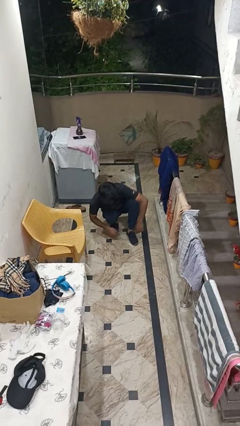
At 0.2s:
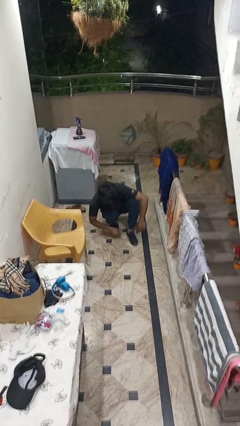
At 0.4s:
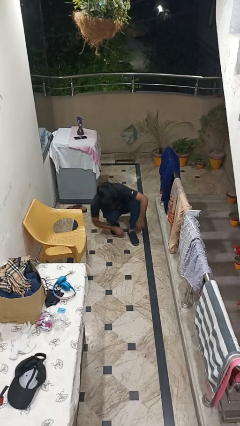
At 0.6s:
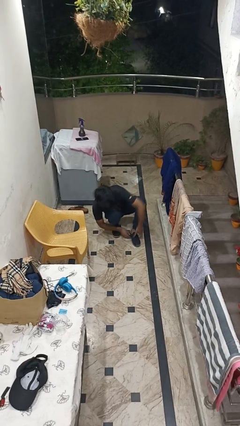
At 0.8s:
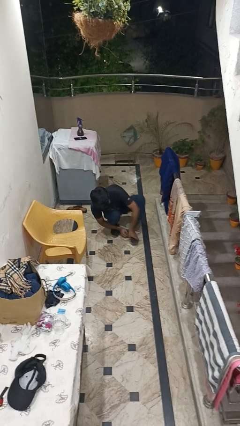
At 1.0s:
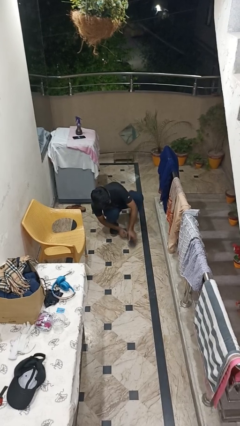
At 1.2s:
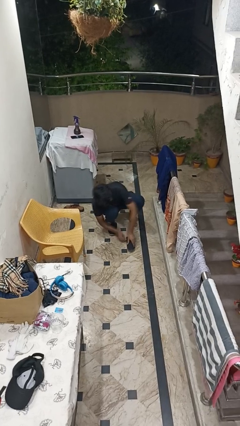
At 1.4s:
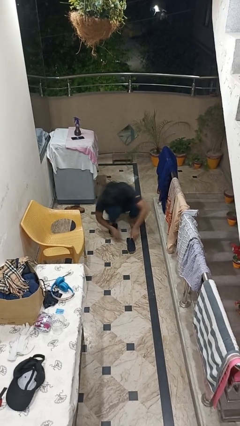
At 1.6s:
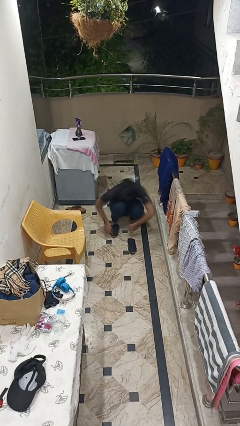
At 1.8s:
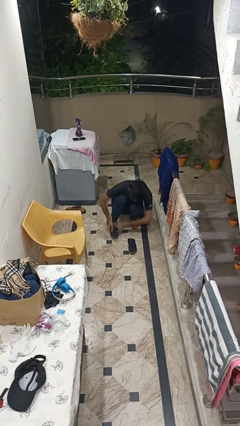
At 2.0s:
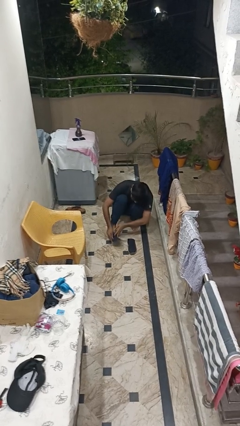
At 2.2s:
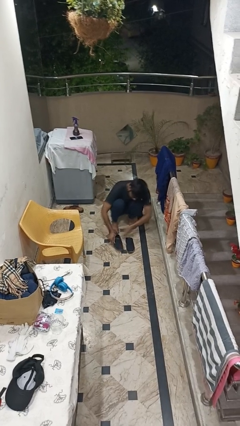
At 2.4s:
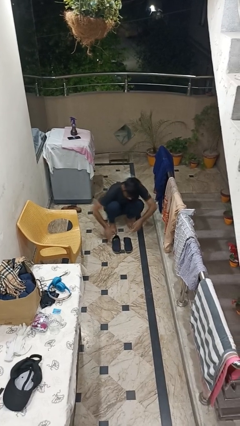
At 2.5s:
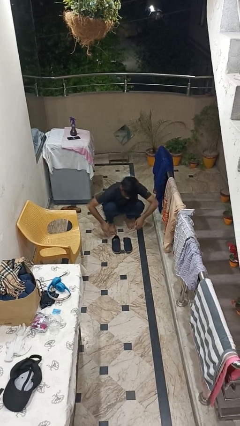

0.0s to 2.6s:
person takes off shoes

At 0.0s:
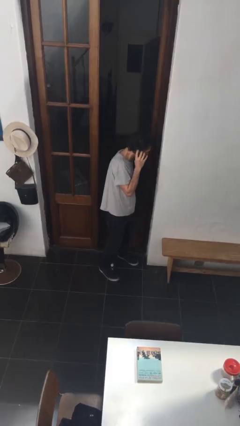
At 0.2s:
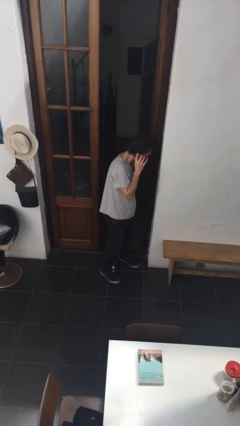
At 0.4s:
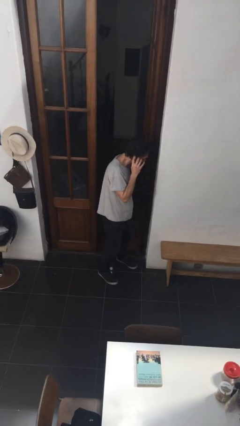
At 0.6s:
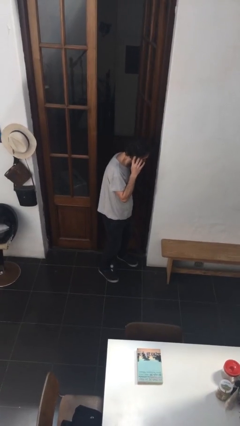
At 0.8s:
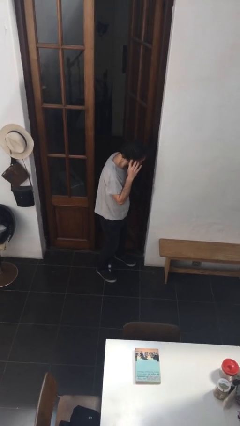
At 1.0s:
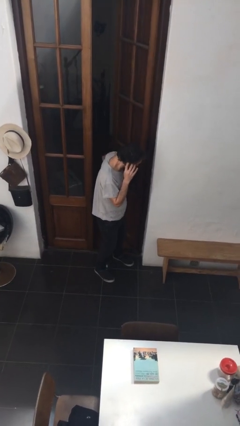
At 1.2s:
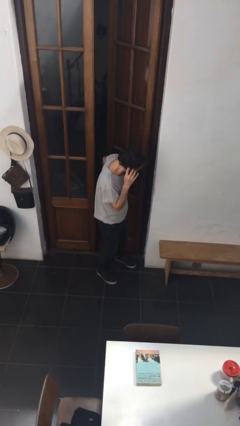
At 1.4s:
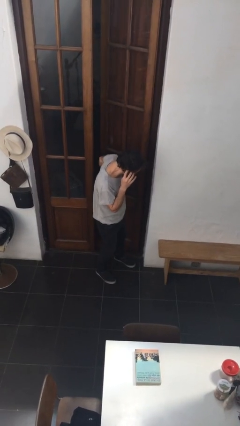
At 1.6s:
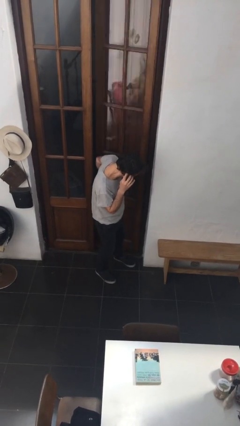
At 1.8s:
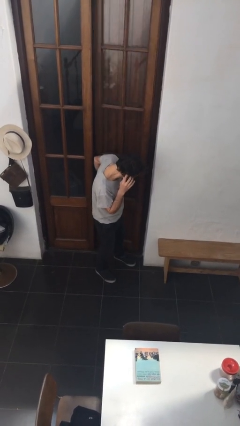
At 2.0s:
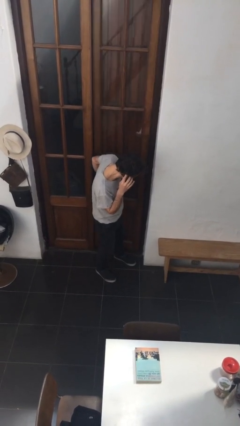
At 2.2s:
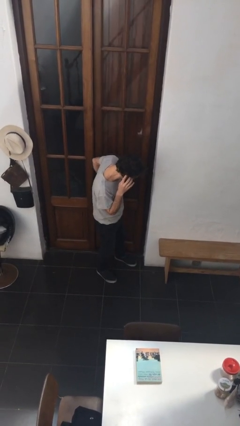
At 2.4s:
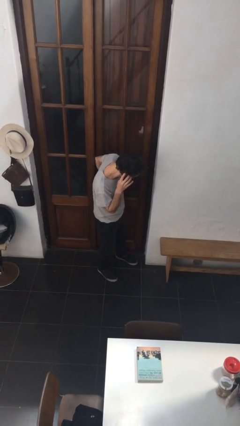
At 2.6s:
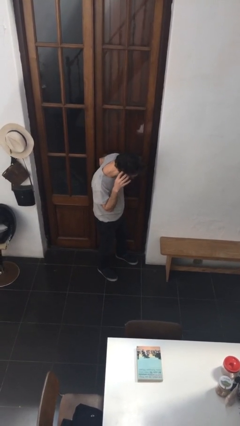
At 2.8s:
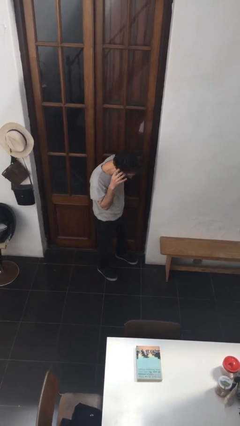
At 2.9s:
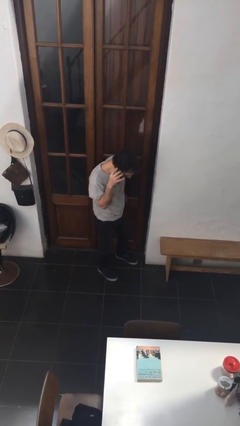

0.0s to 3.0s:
person closes facility door

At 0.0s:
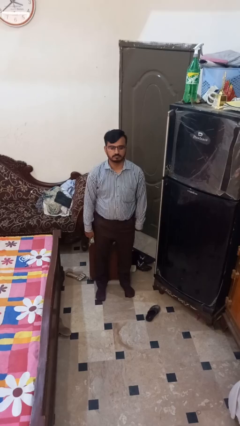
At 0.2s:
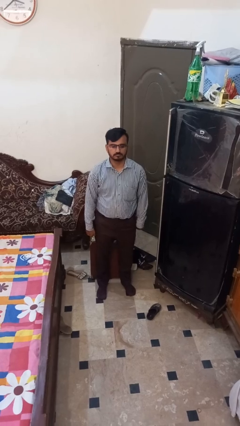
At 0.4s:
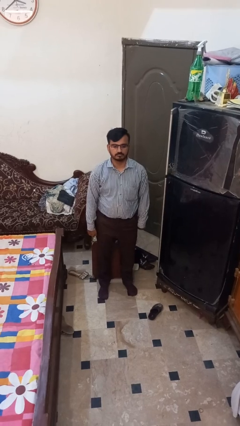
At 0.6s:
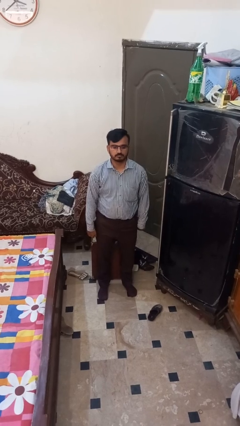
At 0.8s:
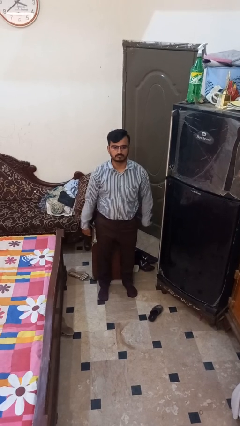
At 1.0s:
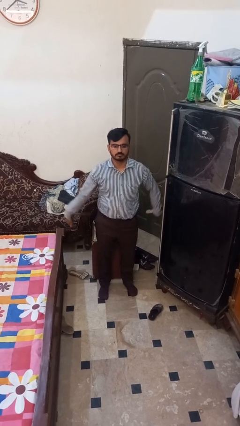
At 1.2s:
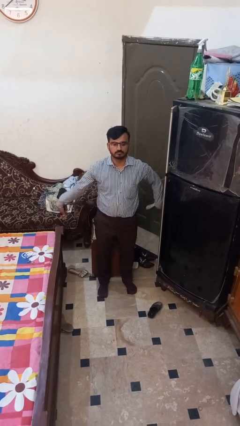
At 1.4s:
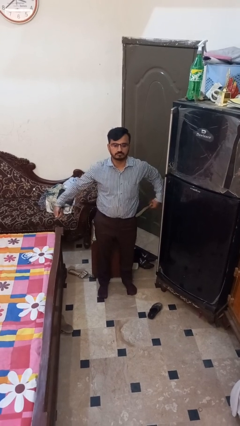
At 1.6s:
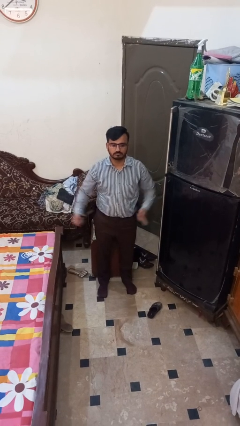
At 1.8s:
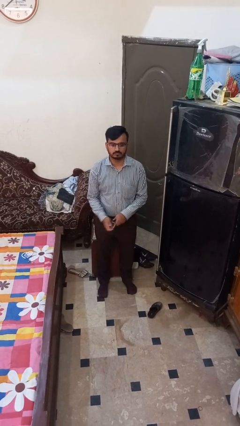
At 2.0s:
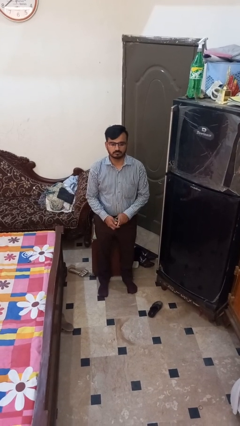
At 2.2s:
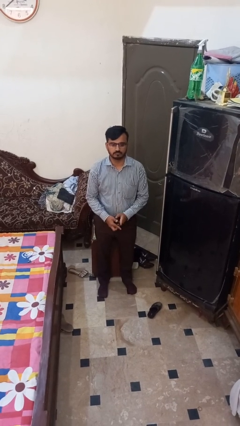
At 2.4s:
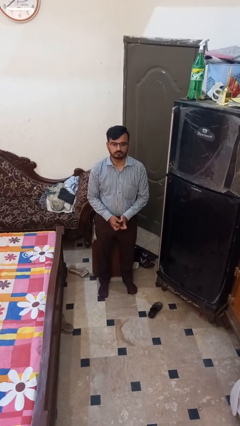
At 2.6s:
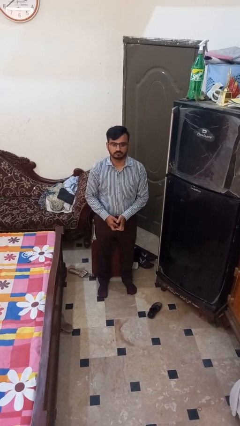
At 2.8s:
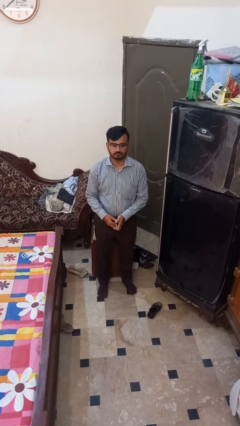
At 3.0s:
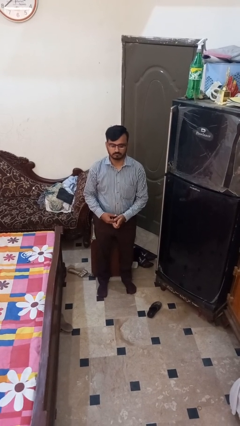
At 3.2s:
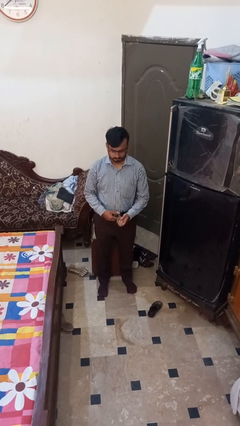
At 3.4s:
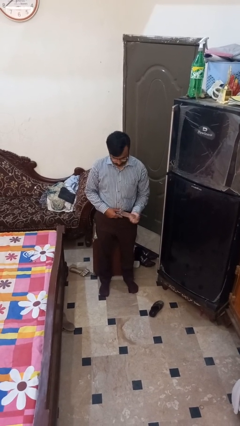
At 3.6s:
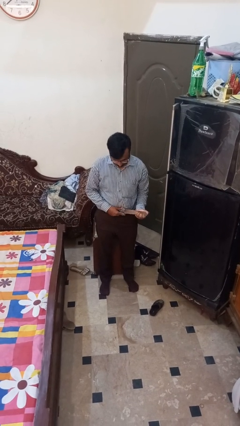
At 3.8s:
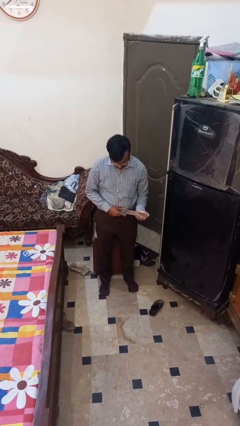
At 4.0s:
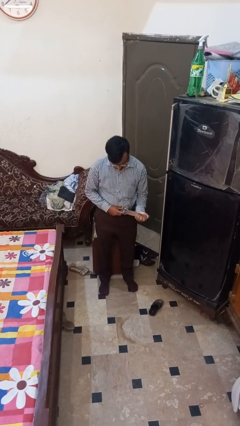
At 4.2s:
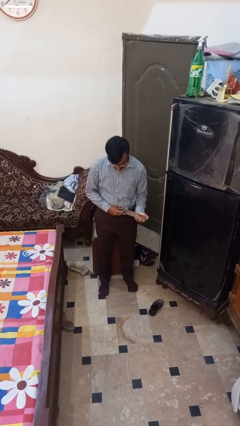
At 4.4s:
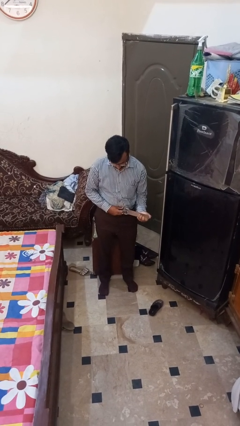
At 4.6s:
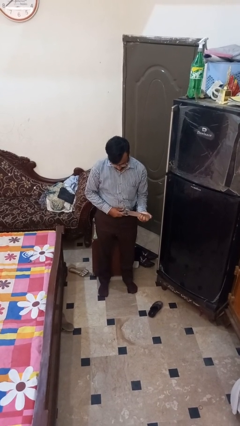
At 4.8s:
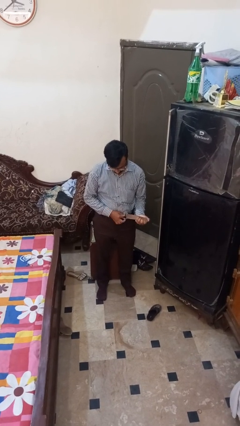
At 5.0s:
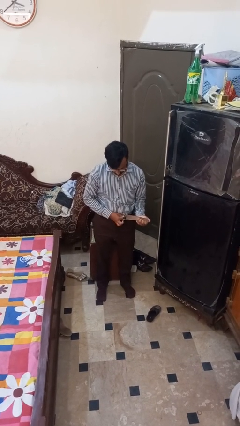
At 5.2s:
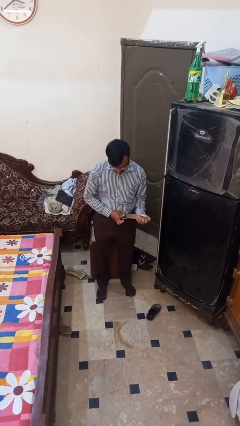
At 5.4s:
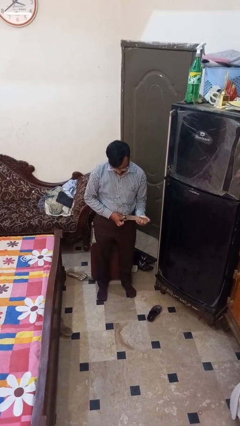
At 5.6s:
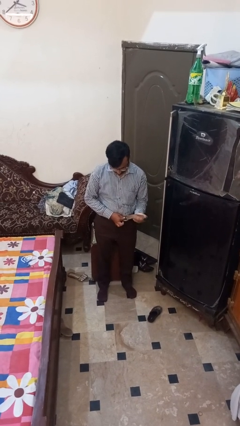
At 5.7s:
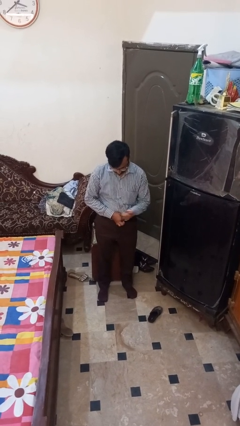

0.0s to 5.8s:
person puts on belt

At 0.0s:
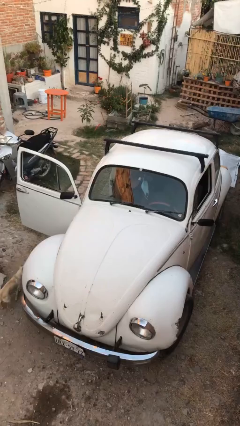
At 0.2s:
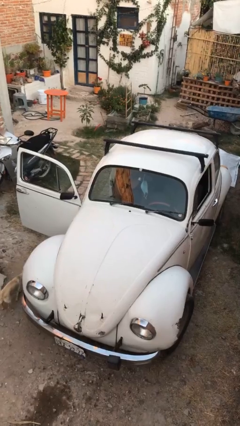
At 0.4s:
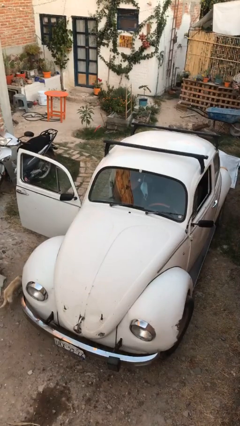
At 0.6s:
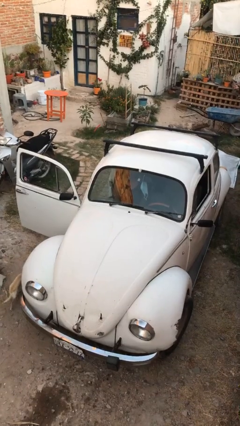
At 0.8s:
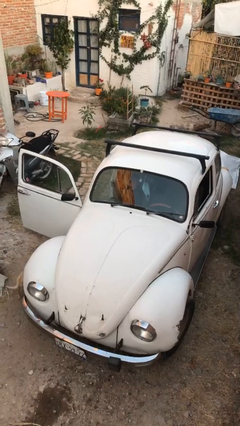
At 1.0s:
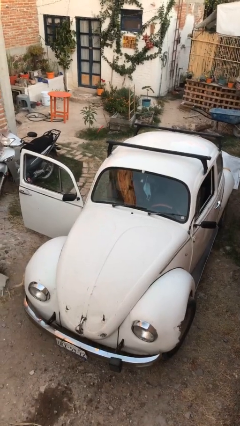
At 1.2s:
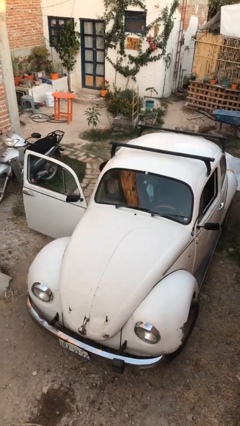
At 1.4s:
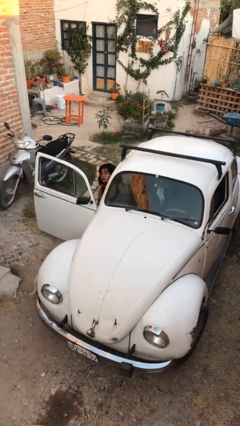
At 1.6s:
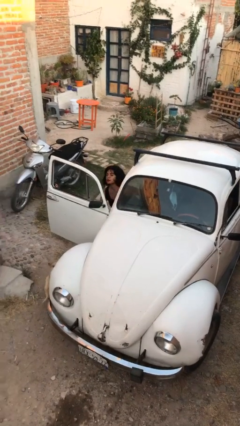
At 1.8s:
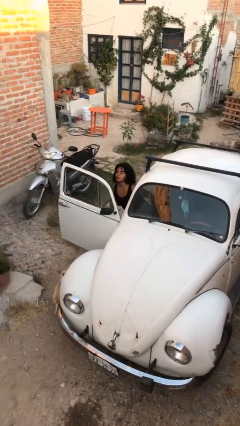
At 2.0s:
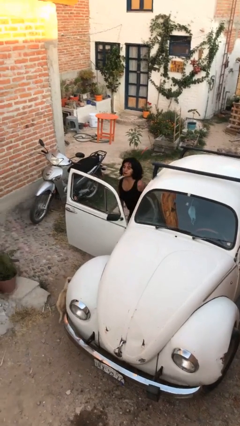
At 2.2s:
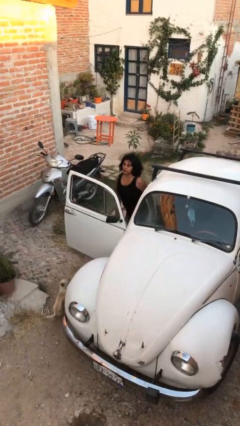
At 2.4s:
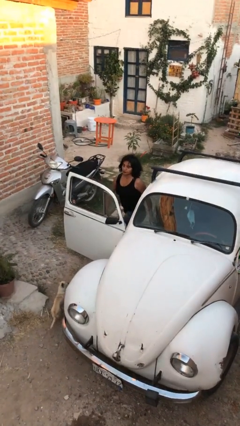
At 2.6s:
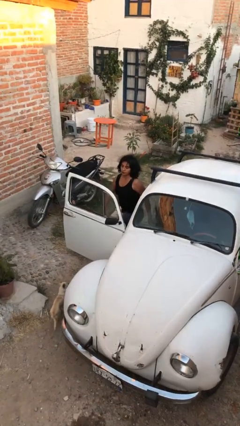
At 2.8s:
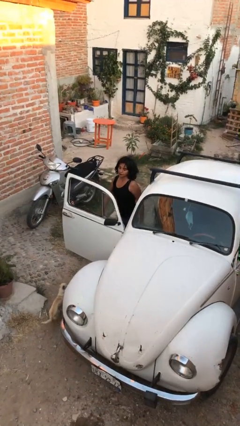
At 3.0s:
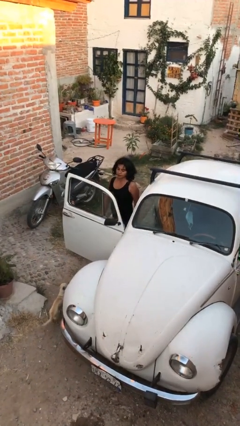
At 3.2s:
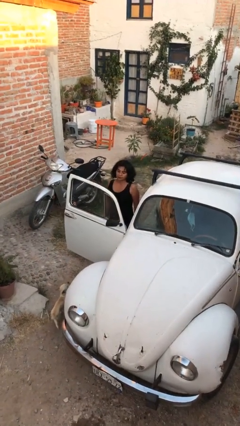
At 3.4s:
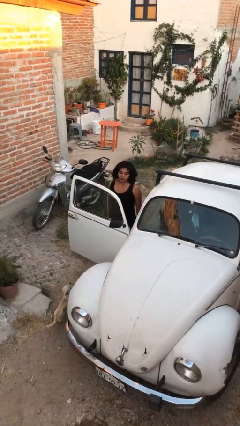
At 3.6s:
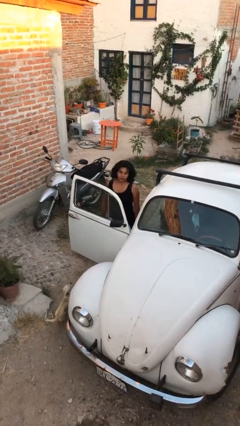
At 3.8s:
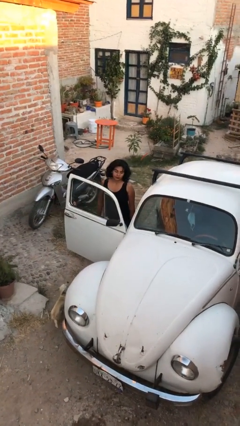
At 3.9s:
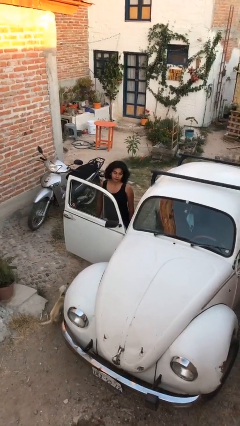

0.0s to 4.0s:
person exits car

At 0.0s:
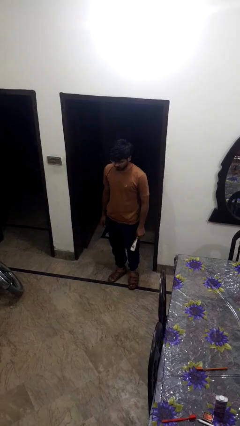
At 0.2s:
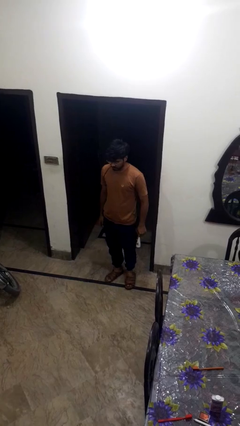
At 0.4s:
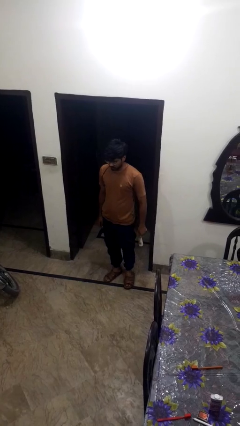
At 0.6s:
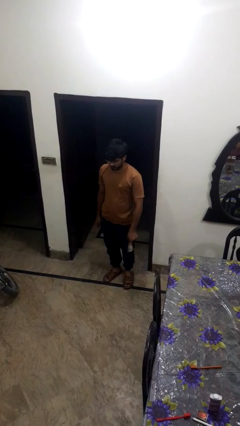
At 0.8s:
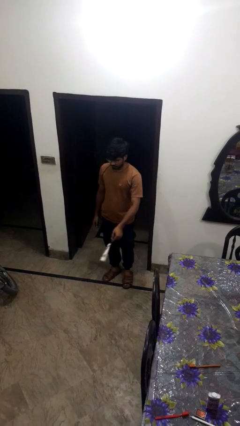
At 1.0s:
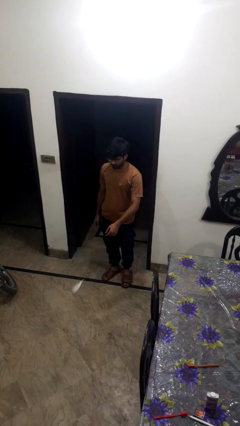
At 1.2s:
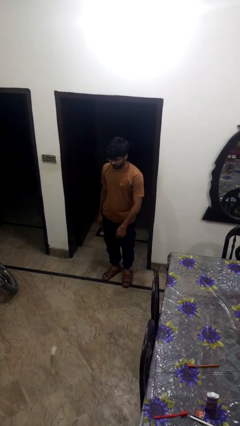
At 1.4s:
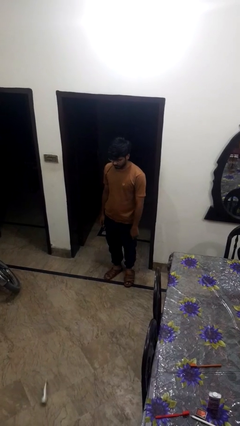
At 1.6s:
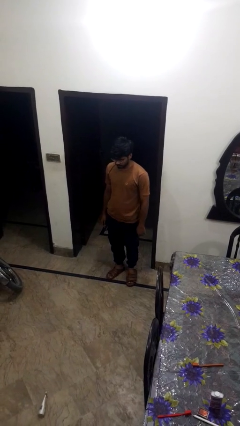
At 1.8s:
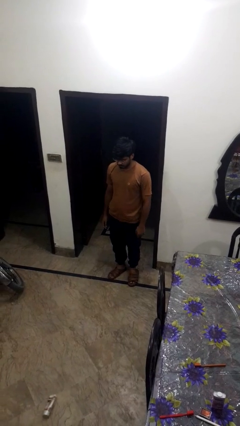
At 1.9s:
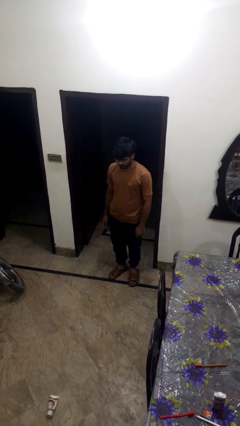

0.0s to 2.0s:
person throws object to ground

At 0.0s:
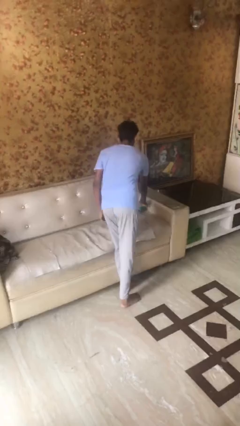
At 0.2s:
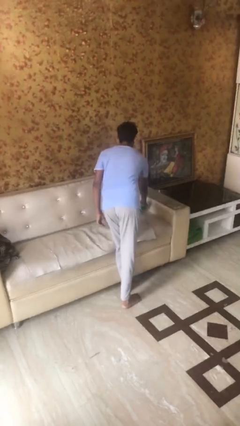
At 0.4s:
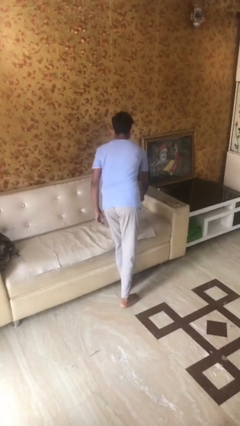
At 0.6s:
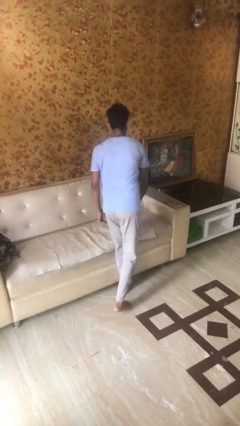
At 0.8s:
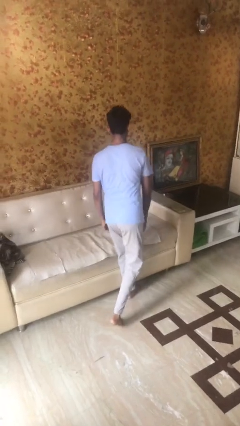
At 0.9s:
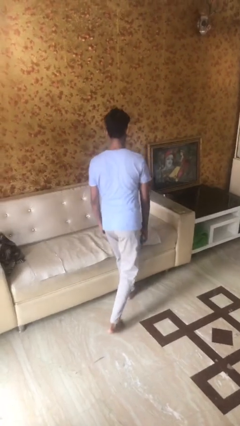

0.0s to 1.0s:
person picks up object from bed
